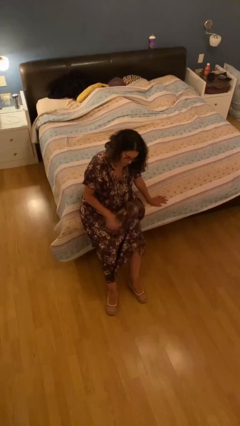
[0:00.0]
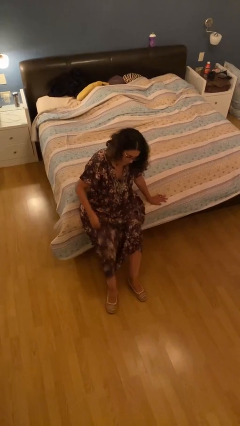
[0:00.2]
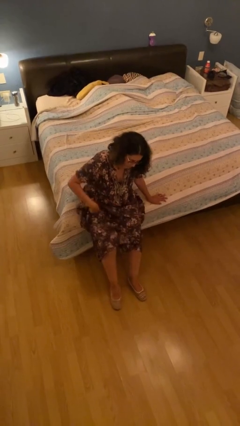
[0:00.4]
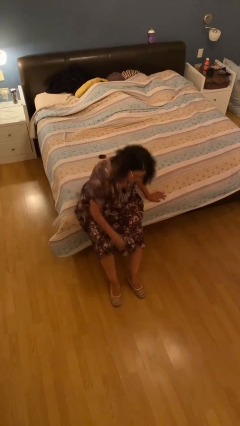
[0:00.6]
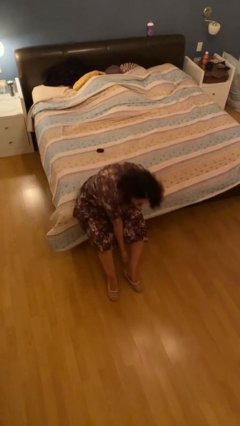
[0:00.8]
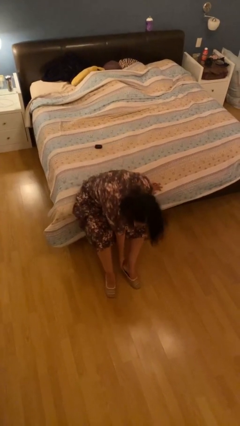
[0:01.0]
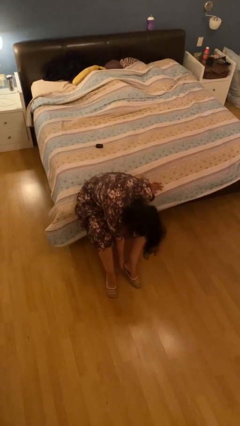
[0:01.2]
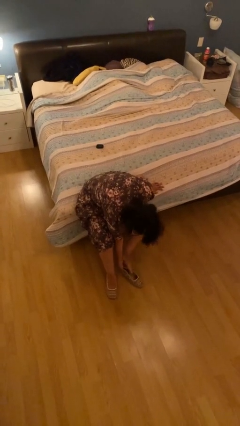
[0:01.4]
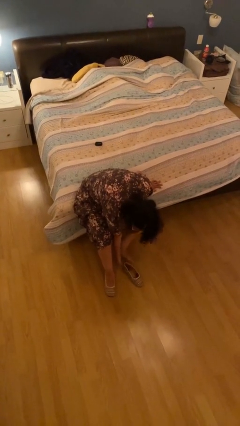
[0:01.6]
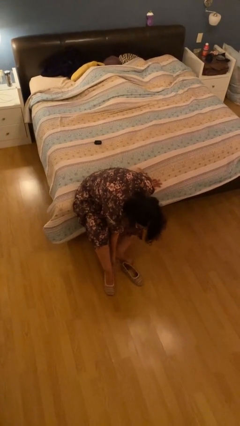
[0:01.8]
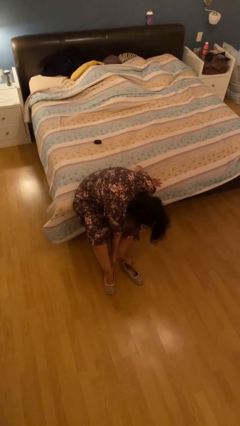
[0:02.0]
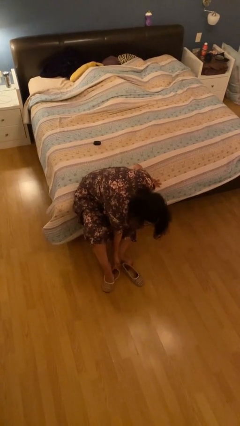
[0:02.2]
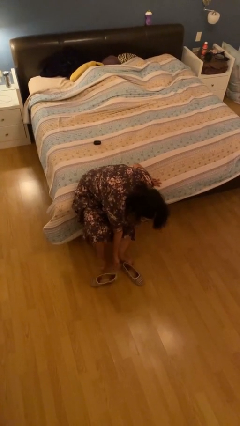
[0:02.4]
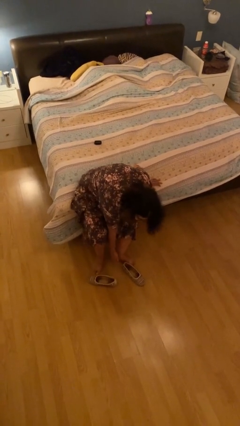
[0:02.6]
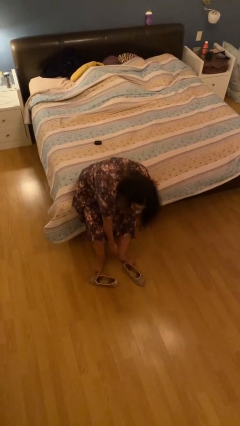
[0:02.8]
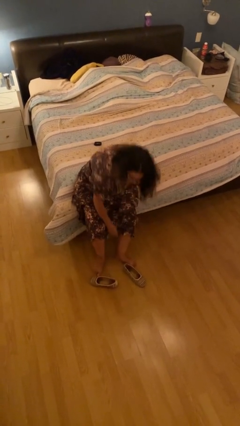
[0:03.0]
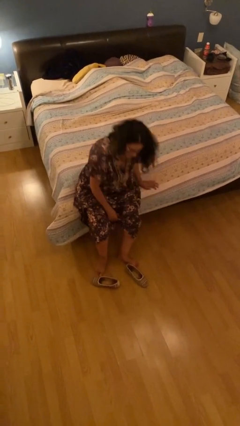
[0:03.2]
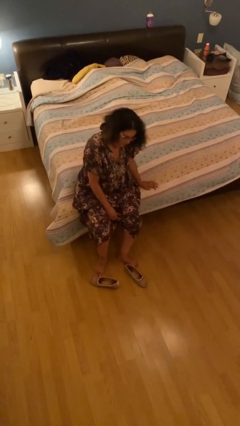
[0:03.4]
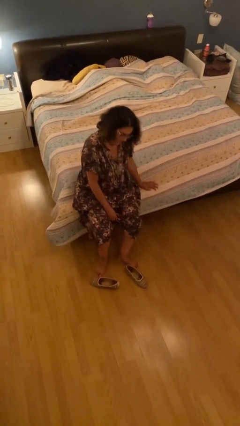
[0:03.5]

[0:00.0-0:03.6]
person takes off shoes

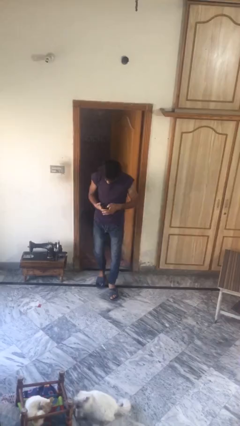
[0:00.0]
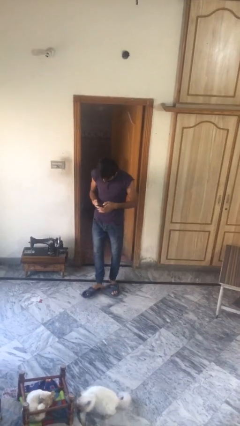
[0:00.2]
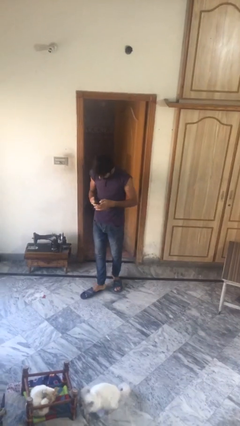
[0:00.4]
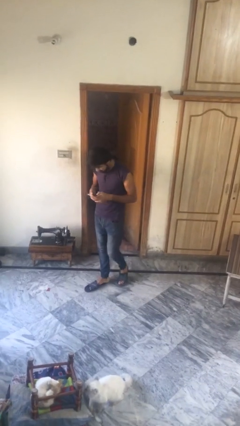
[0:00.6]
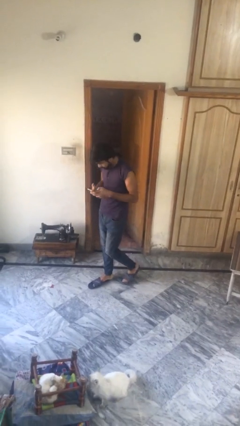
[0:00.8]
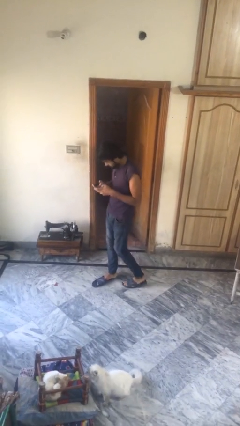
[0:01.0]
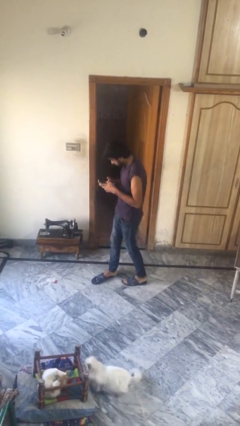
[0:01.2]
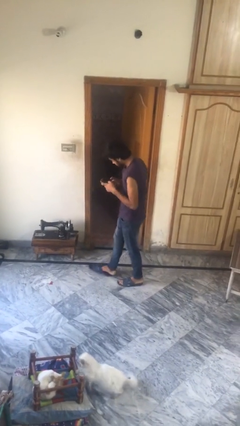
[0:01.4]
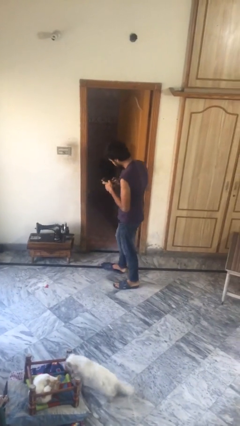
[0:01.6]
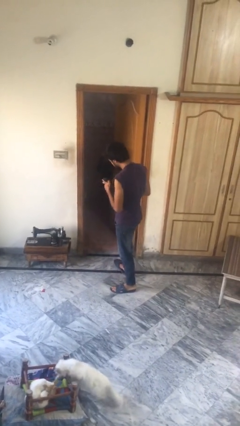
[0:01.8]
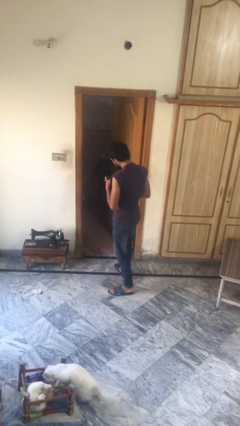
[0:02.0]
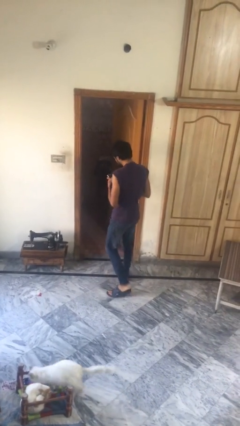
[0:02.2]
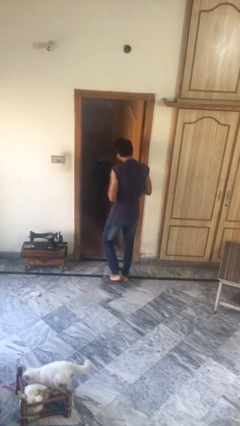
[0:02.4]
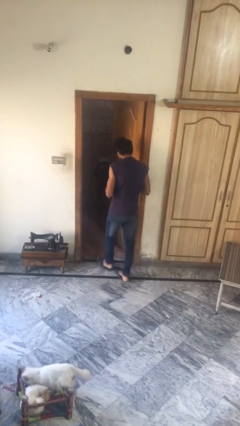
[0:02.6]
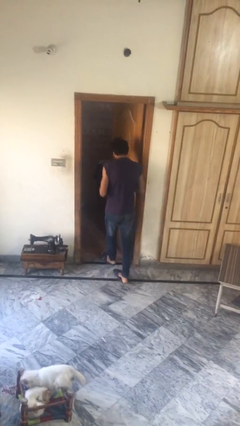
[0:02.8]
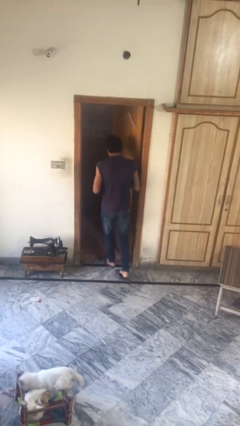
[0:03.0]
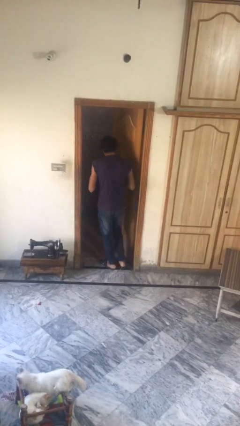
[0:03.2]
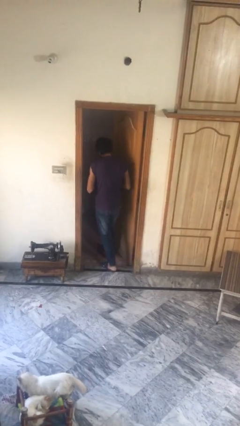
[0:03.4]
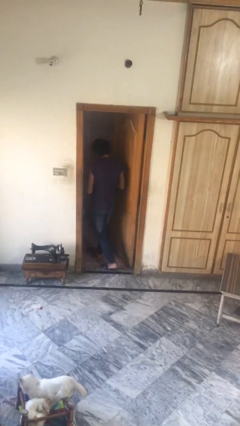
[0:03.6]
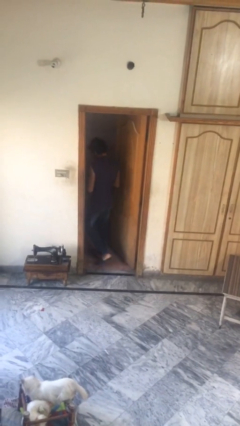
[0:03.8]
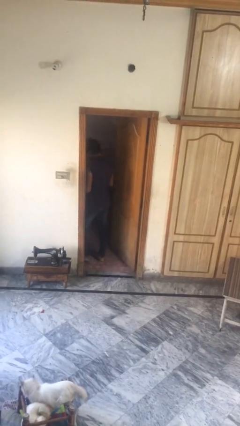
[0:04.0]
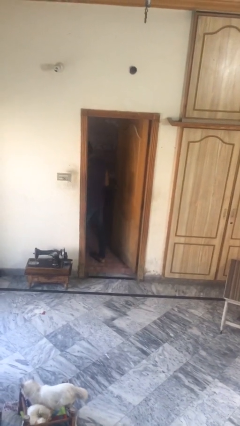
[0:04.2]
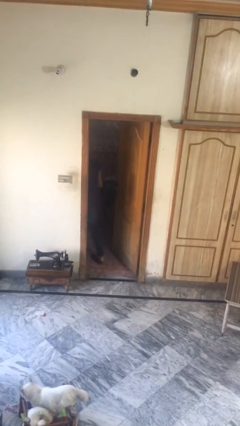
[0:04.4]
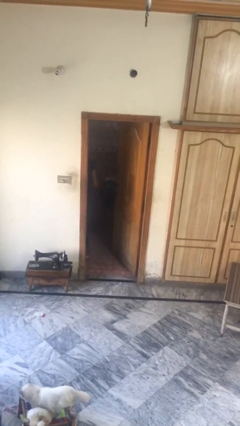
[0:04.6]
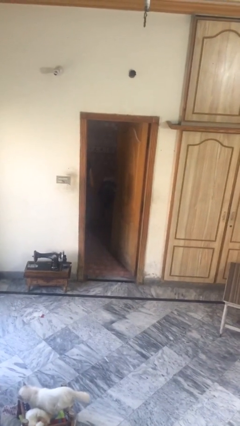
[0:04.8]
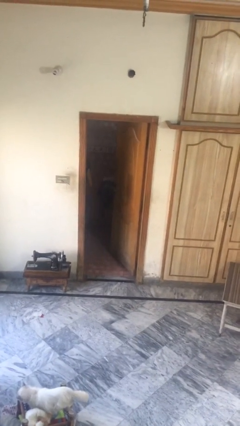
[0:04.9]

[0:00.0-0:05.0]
person exits scene through structure

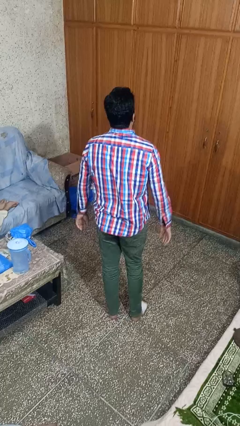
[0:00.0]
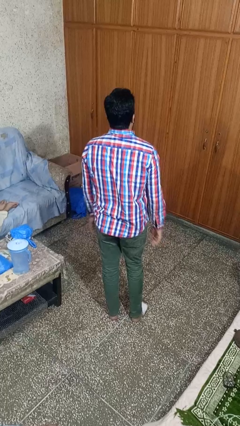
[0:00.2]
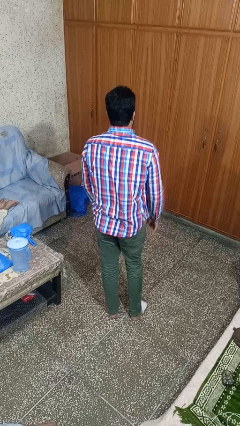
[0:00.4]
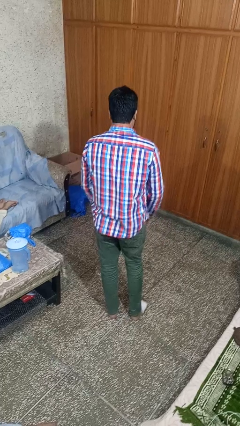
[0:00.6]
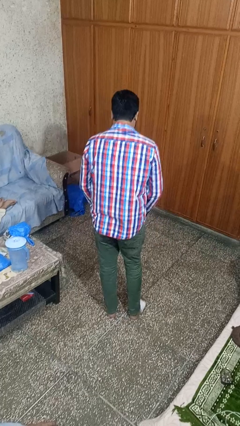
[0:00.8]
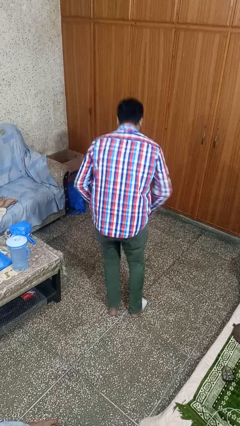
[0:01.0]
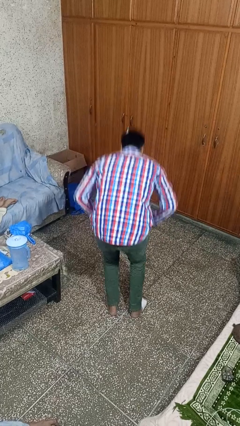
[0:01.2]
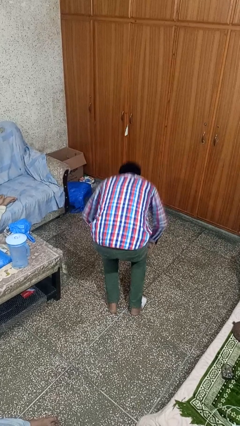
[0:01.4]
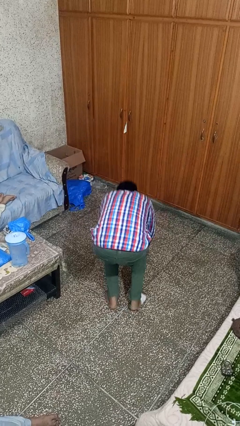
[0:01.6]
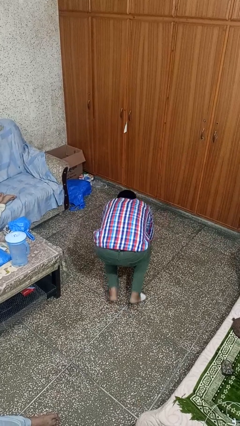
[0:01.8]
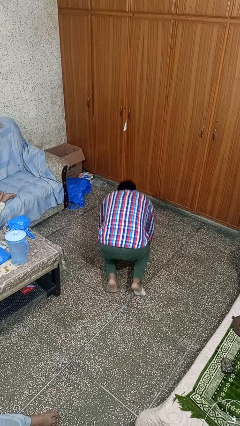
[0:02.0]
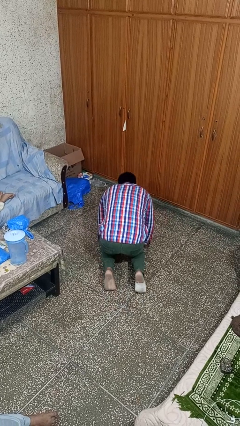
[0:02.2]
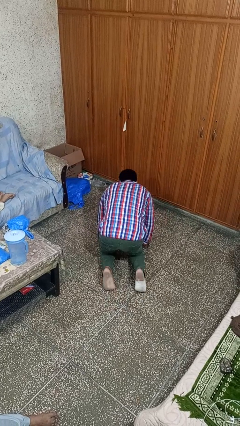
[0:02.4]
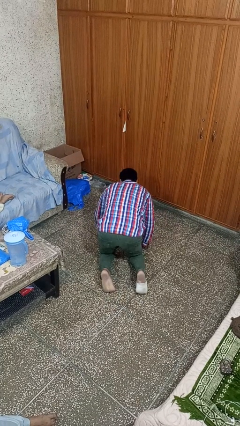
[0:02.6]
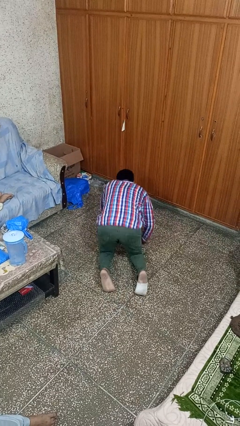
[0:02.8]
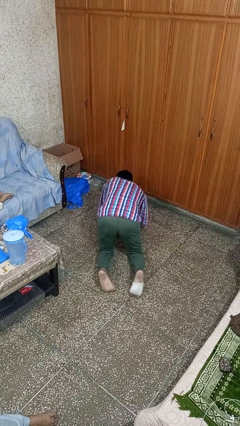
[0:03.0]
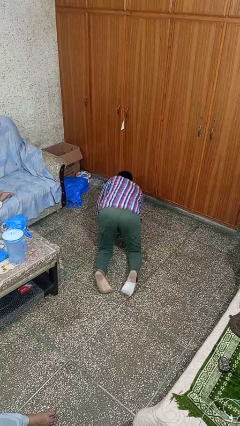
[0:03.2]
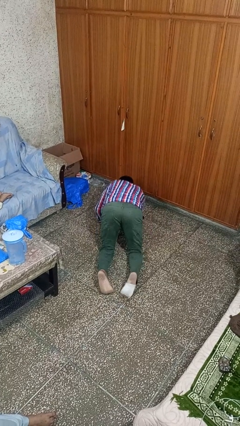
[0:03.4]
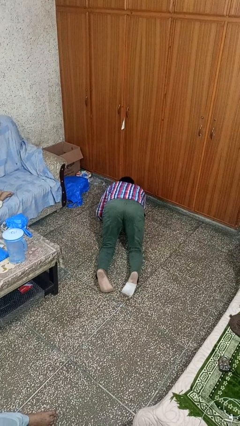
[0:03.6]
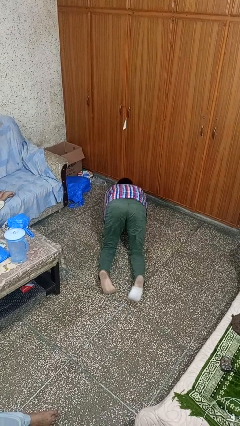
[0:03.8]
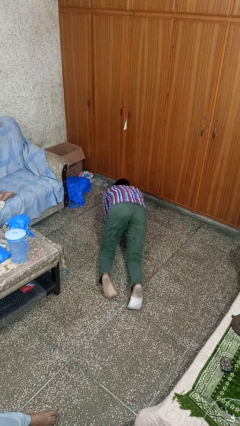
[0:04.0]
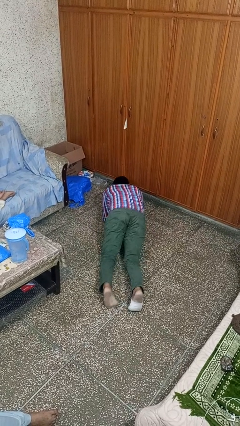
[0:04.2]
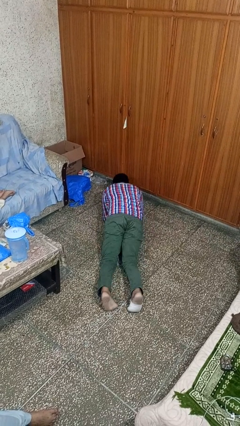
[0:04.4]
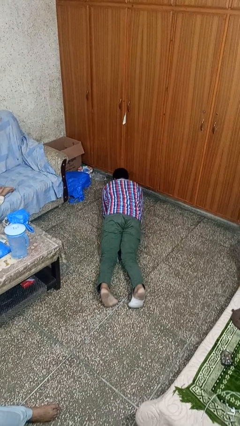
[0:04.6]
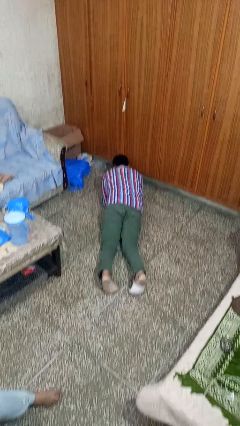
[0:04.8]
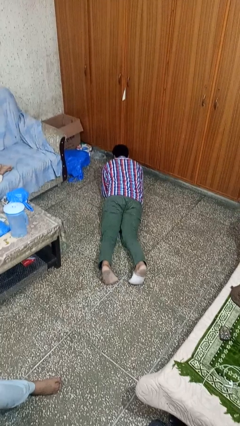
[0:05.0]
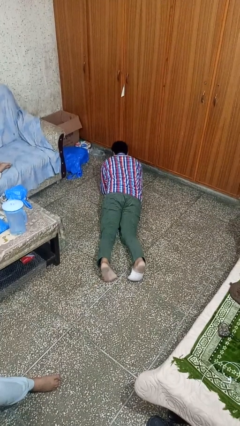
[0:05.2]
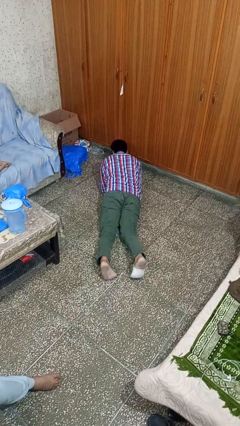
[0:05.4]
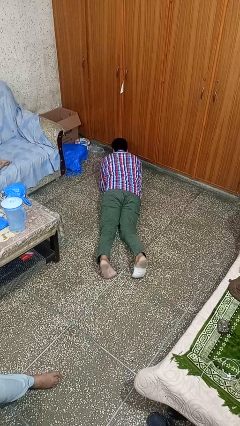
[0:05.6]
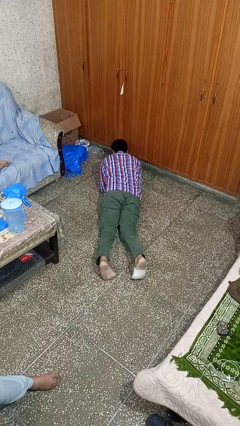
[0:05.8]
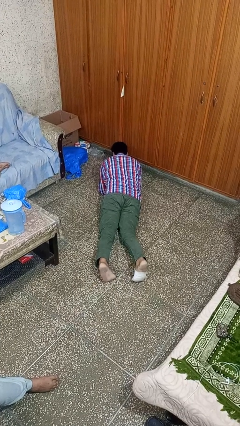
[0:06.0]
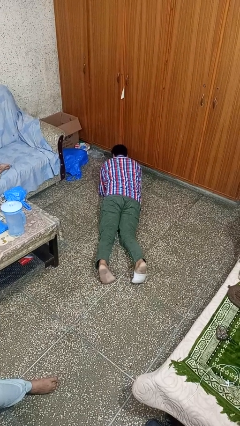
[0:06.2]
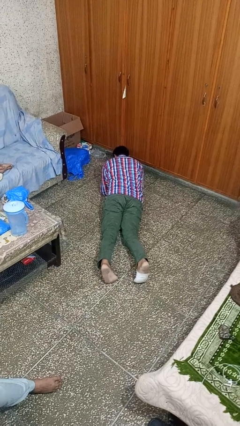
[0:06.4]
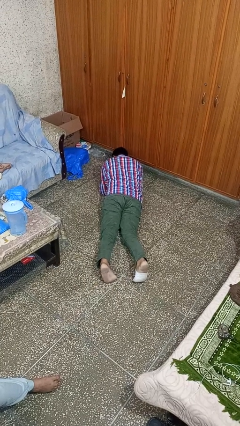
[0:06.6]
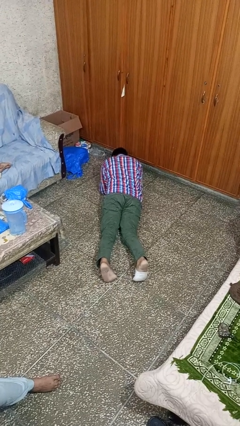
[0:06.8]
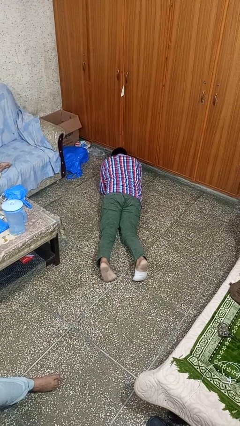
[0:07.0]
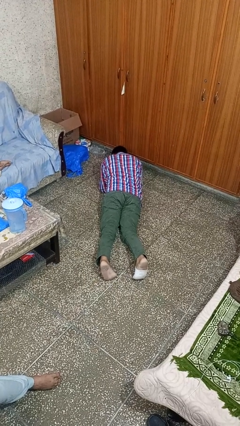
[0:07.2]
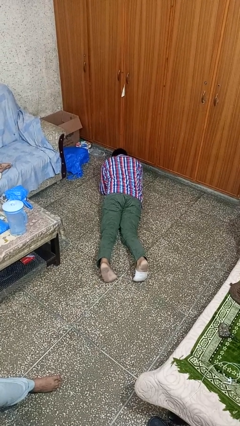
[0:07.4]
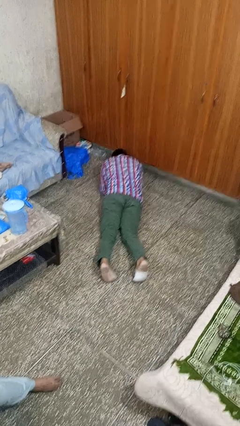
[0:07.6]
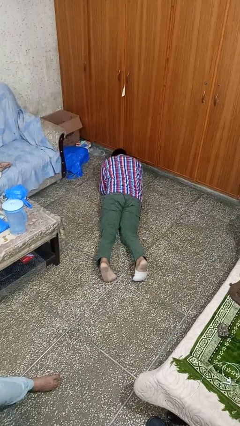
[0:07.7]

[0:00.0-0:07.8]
person exercises with plank

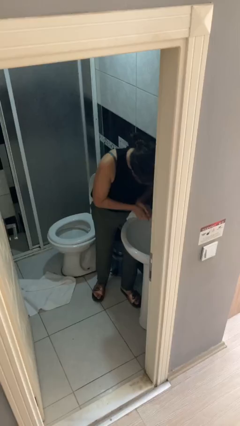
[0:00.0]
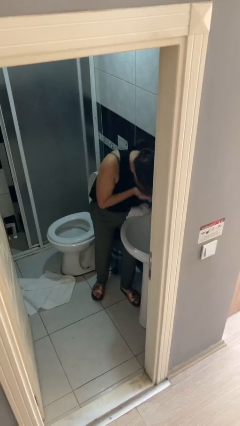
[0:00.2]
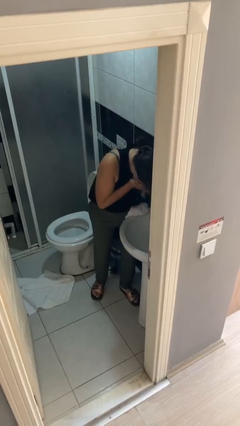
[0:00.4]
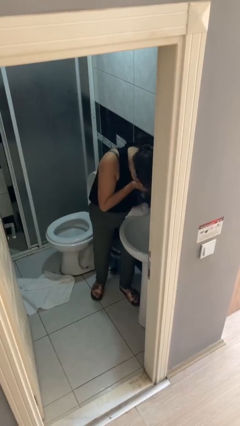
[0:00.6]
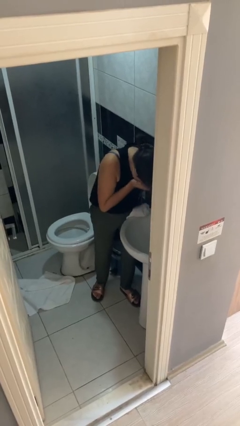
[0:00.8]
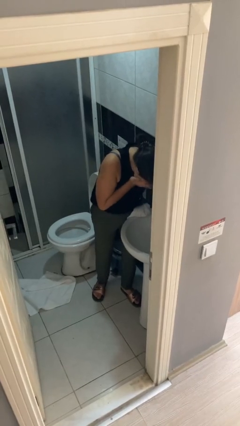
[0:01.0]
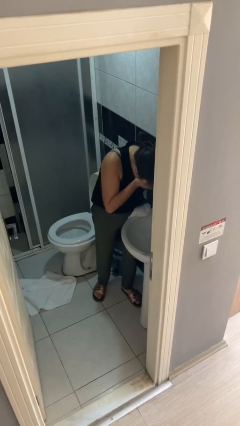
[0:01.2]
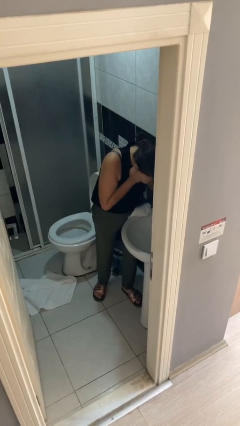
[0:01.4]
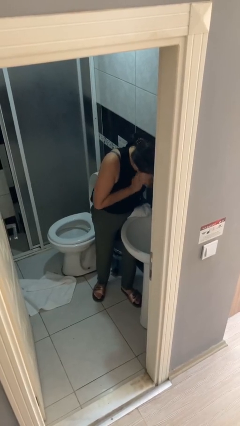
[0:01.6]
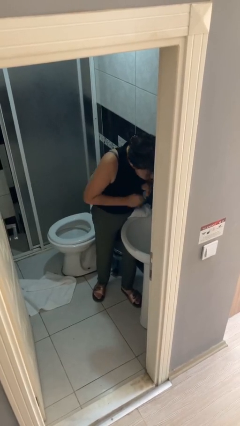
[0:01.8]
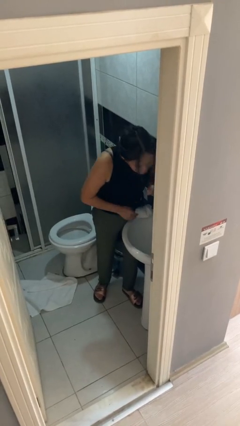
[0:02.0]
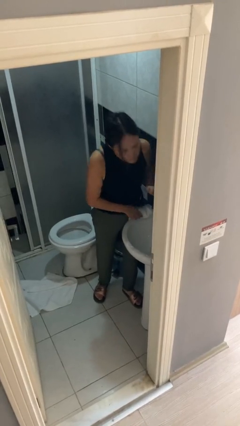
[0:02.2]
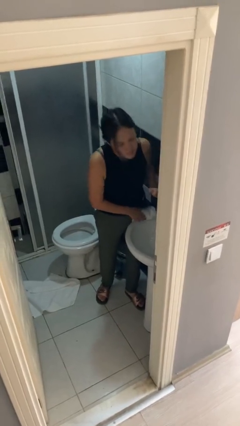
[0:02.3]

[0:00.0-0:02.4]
person washes face
